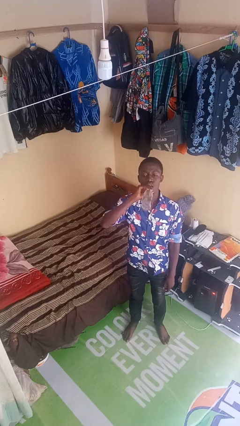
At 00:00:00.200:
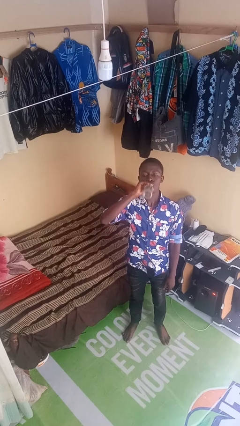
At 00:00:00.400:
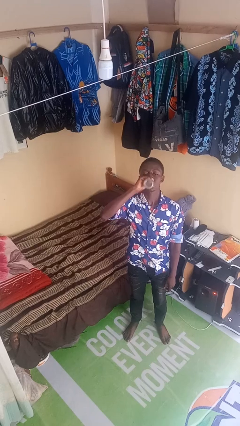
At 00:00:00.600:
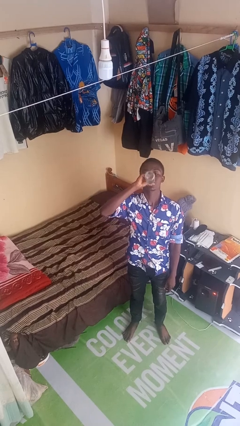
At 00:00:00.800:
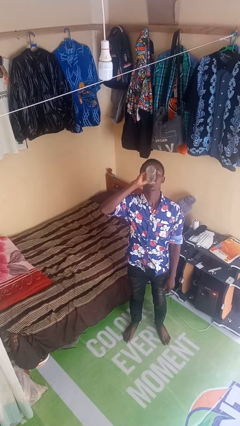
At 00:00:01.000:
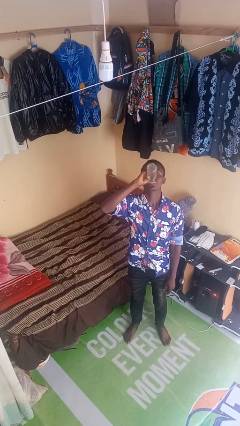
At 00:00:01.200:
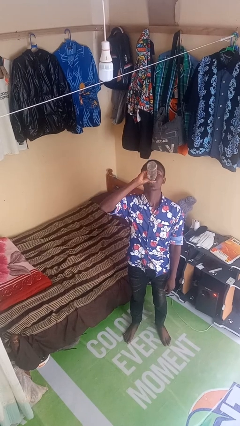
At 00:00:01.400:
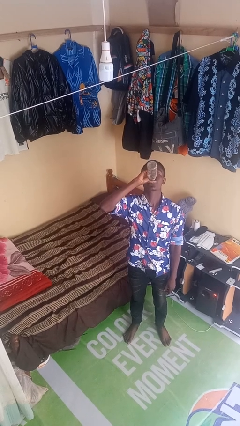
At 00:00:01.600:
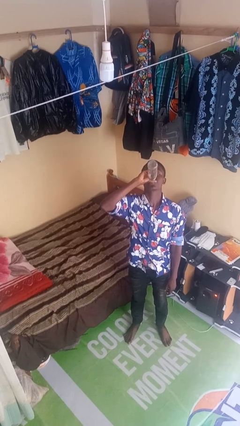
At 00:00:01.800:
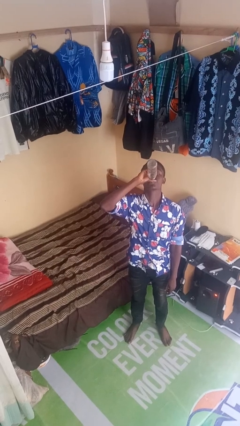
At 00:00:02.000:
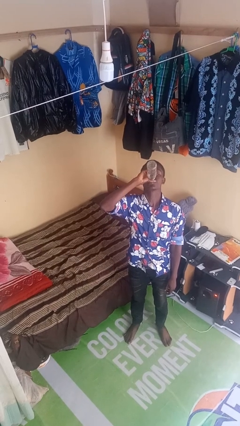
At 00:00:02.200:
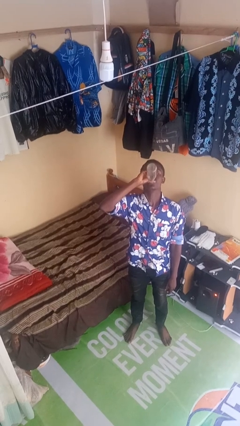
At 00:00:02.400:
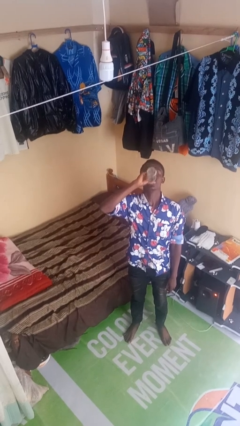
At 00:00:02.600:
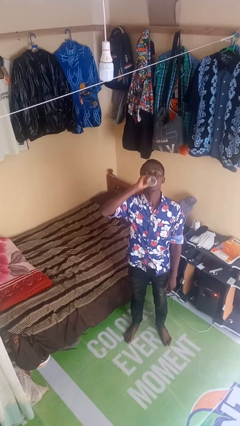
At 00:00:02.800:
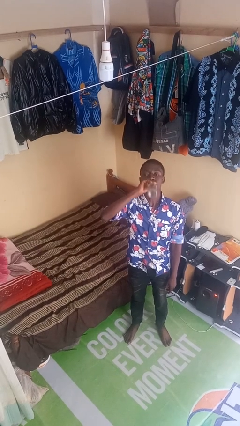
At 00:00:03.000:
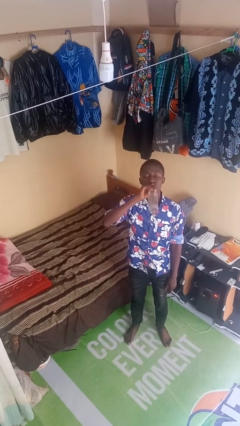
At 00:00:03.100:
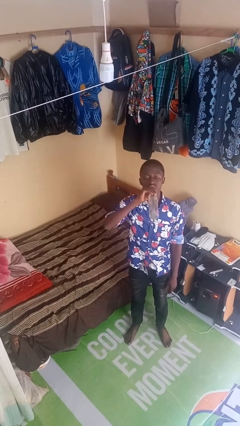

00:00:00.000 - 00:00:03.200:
person drinks from bottle

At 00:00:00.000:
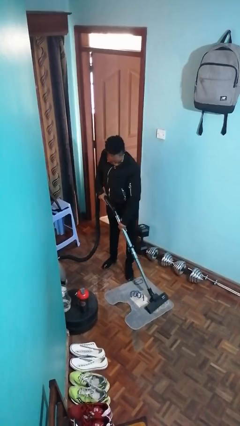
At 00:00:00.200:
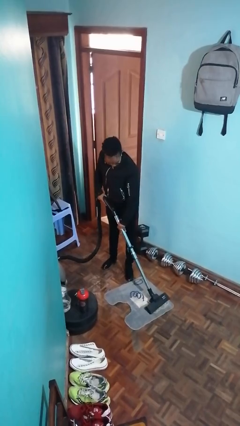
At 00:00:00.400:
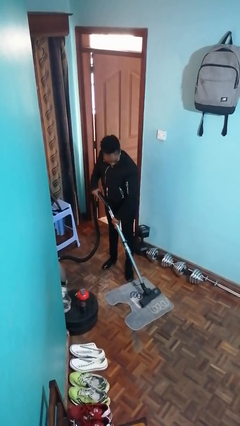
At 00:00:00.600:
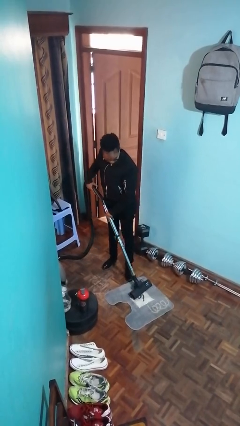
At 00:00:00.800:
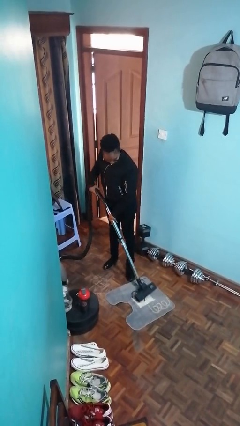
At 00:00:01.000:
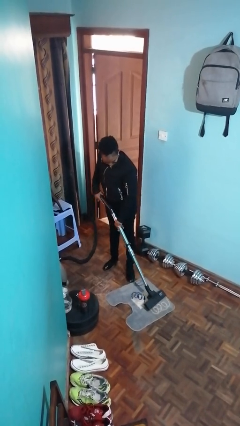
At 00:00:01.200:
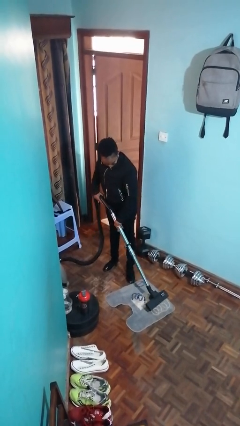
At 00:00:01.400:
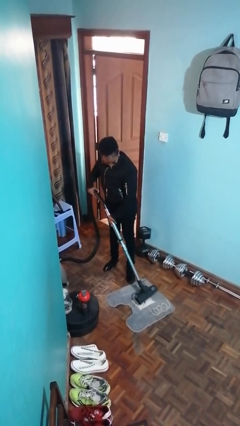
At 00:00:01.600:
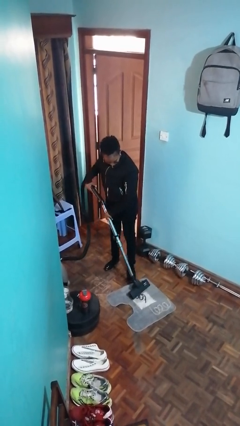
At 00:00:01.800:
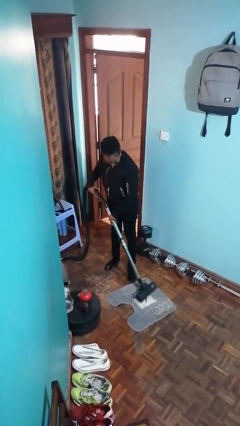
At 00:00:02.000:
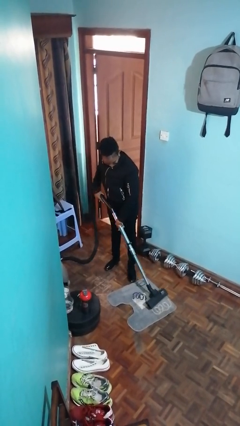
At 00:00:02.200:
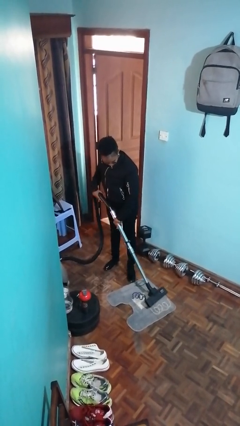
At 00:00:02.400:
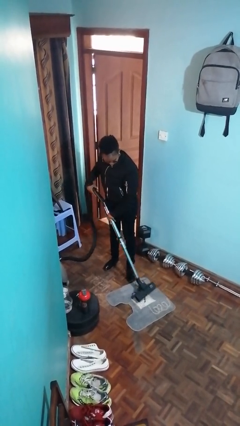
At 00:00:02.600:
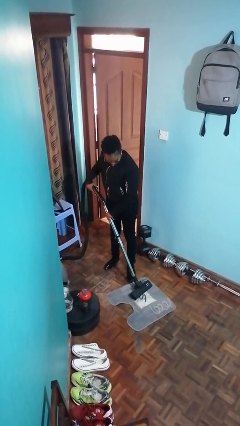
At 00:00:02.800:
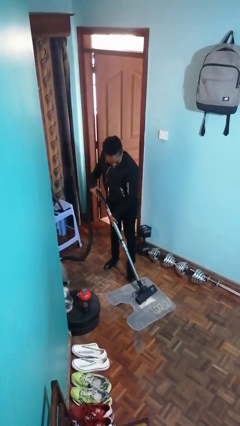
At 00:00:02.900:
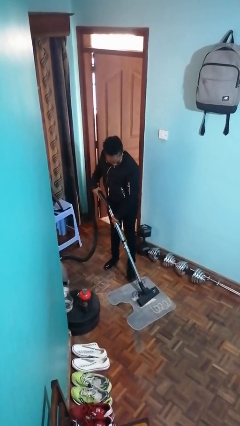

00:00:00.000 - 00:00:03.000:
person vacuums carpet

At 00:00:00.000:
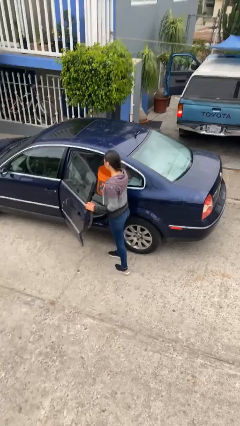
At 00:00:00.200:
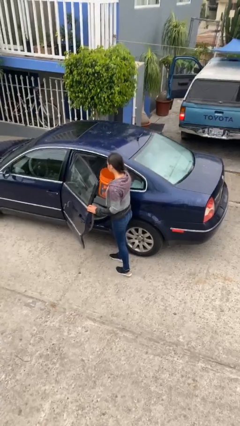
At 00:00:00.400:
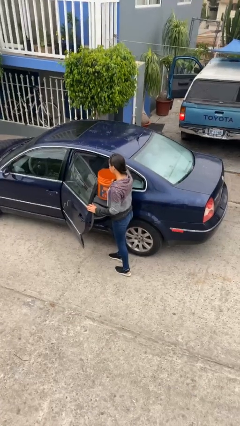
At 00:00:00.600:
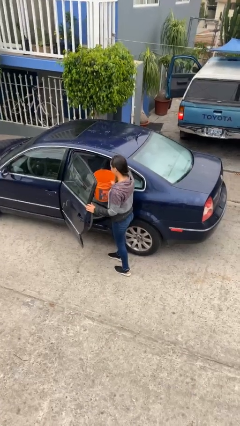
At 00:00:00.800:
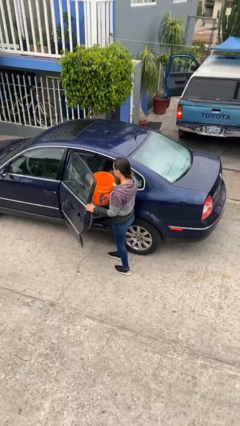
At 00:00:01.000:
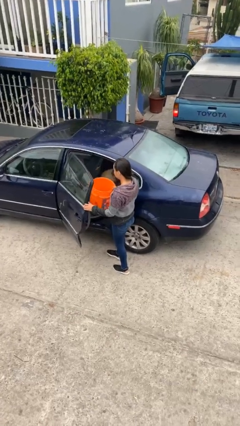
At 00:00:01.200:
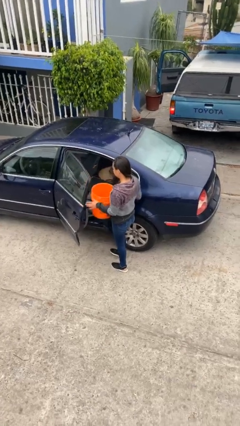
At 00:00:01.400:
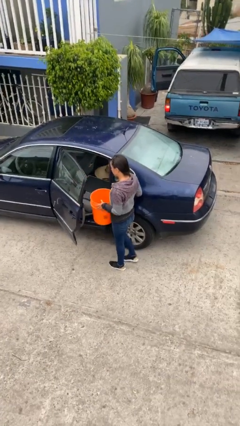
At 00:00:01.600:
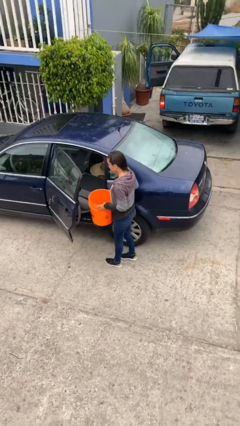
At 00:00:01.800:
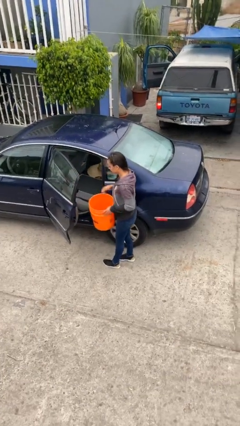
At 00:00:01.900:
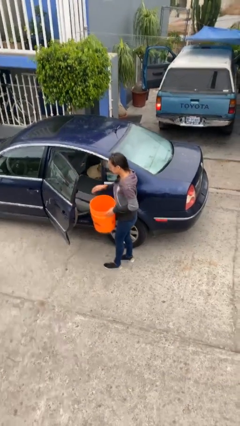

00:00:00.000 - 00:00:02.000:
person unloads car

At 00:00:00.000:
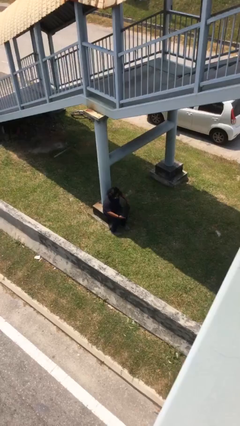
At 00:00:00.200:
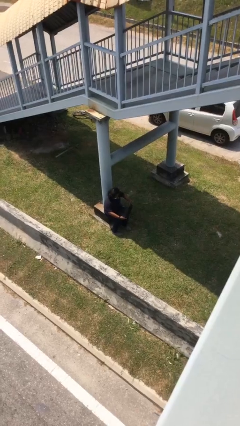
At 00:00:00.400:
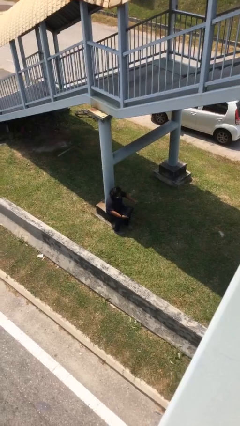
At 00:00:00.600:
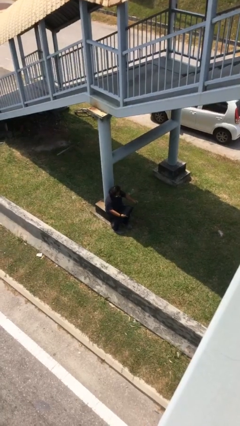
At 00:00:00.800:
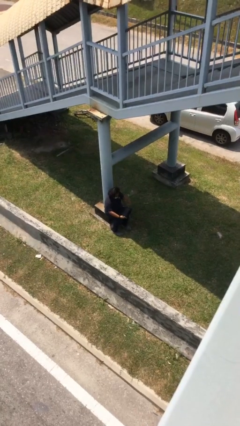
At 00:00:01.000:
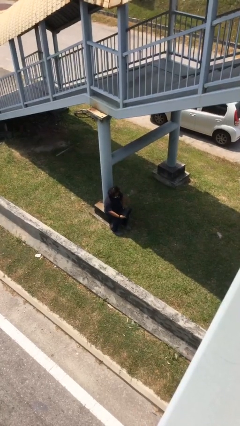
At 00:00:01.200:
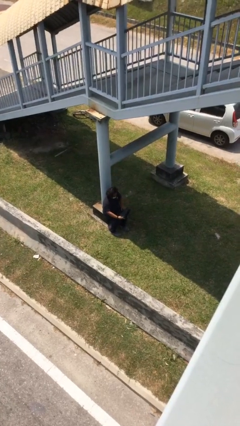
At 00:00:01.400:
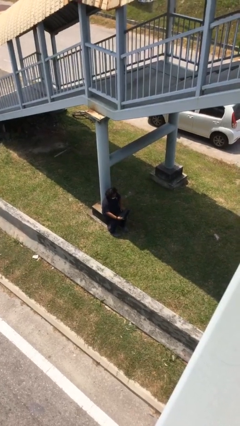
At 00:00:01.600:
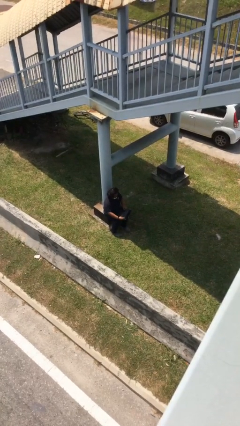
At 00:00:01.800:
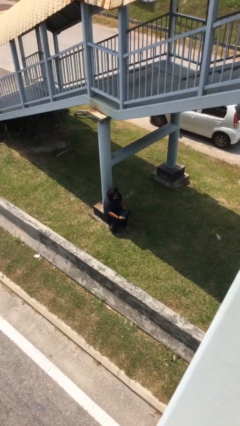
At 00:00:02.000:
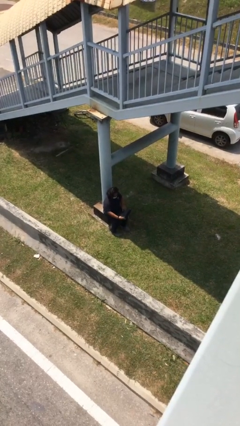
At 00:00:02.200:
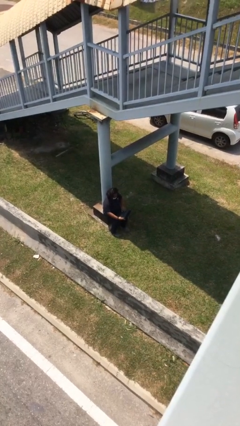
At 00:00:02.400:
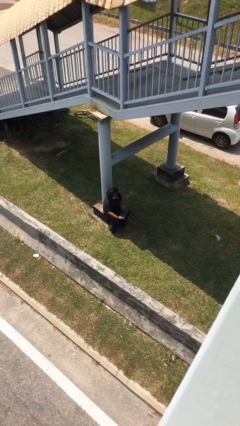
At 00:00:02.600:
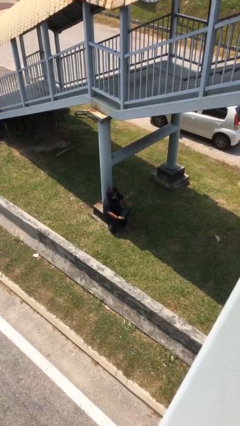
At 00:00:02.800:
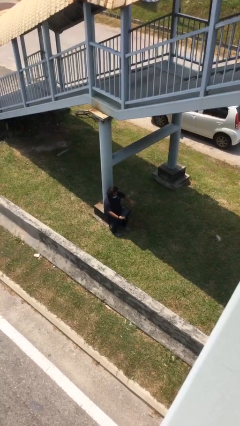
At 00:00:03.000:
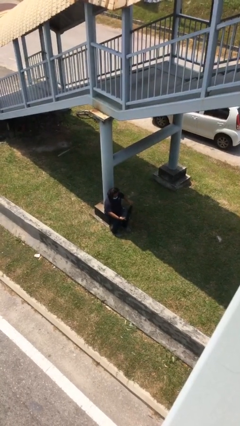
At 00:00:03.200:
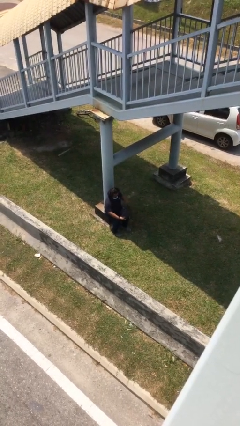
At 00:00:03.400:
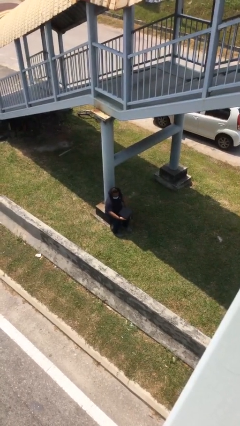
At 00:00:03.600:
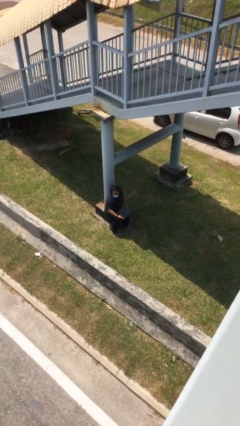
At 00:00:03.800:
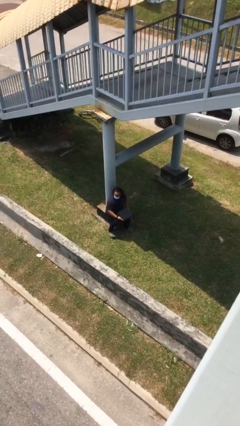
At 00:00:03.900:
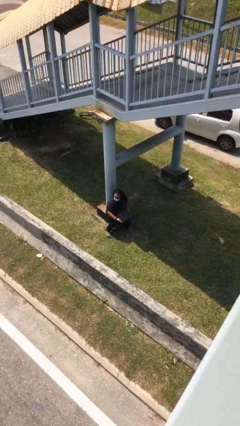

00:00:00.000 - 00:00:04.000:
person interacts with laptop

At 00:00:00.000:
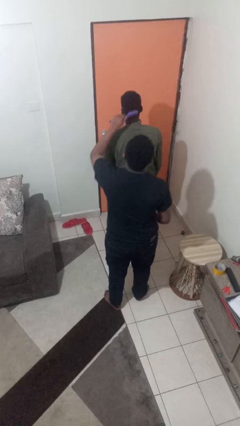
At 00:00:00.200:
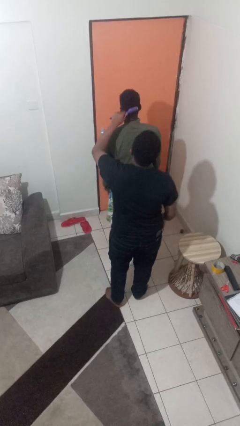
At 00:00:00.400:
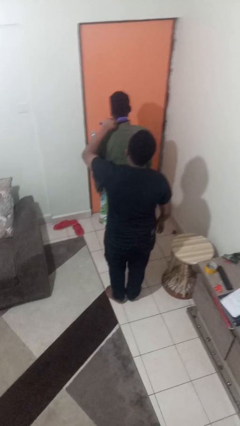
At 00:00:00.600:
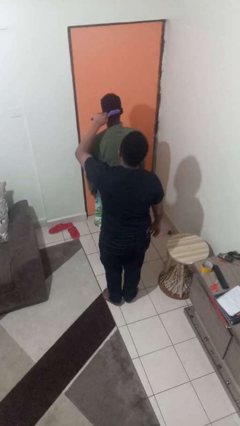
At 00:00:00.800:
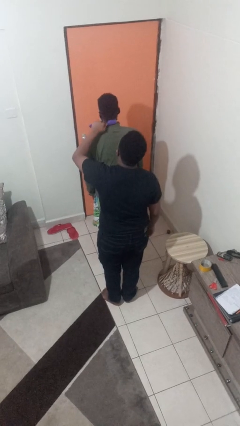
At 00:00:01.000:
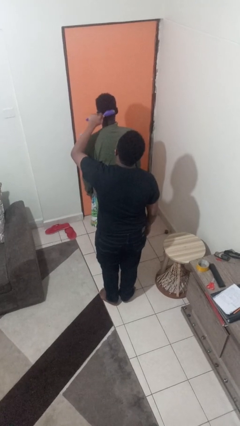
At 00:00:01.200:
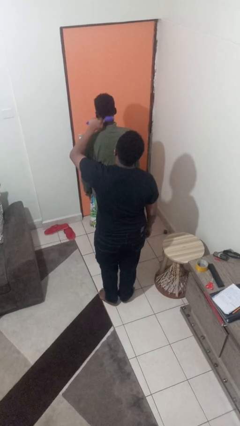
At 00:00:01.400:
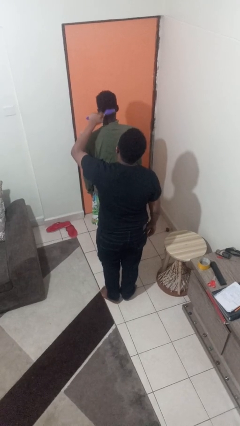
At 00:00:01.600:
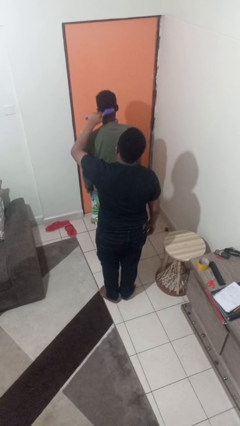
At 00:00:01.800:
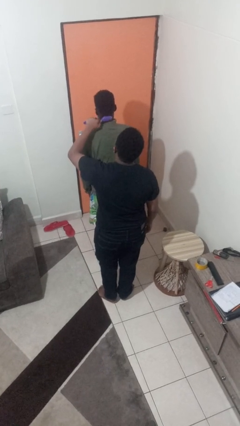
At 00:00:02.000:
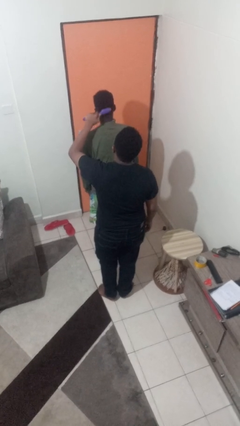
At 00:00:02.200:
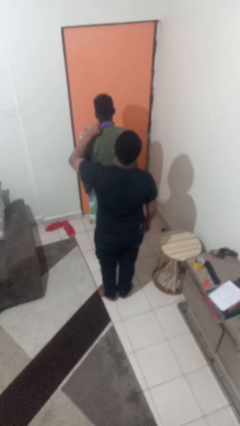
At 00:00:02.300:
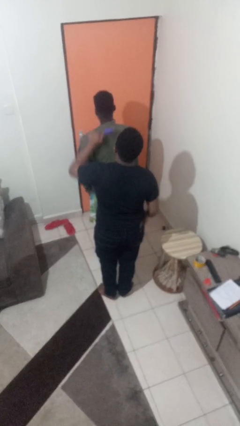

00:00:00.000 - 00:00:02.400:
person brushes hair of person

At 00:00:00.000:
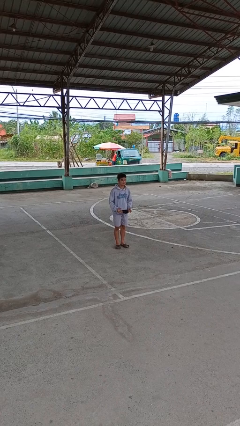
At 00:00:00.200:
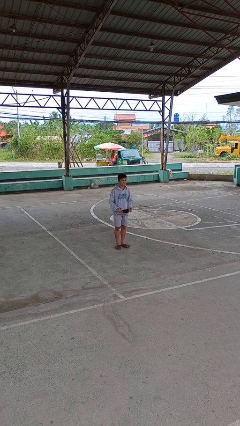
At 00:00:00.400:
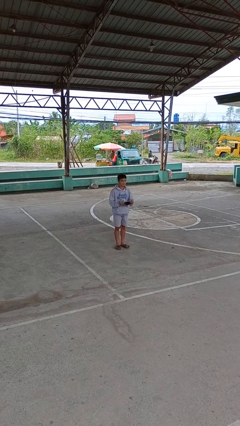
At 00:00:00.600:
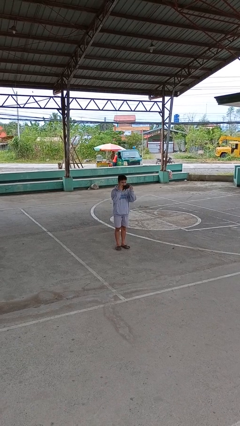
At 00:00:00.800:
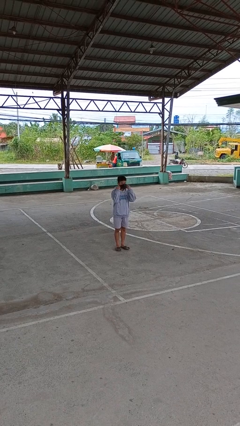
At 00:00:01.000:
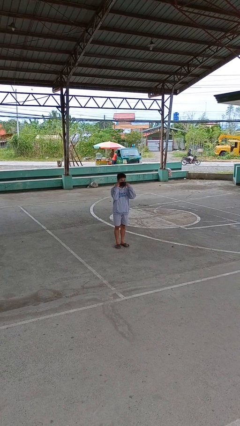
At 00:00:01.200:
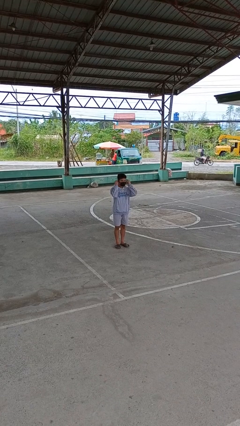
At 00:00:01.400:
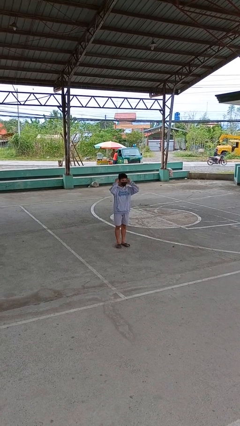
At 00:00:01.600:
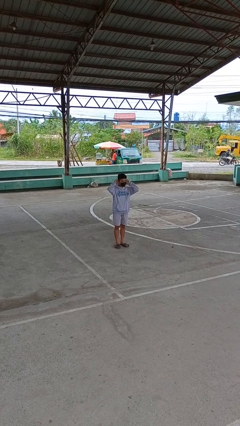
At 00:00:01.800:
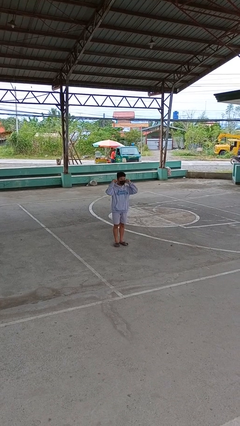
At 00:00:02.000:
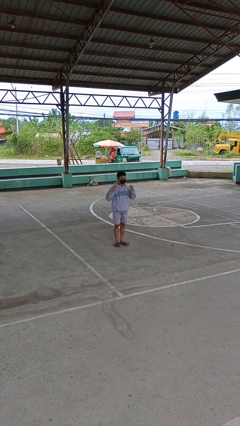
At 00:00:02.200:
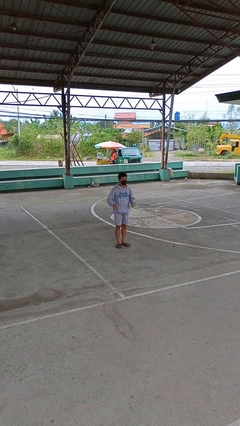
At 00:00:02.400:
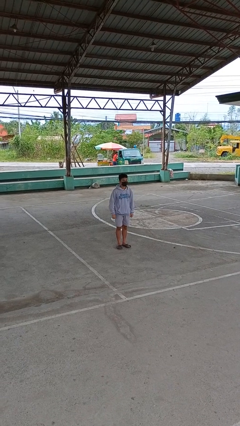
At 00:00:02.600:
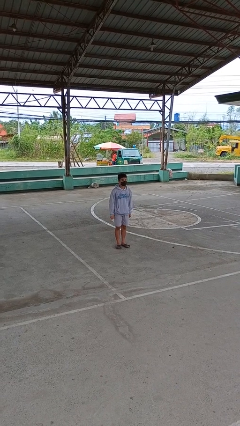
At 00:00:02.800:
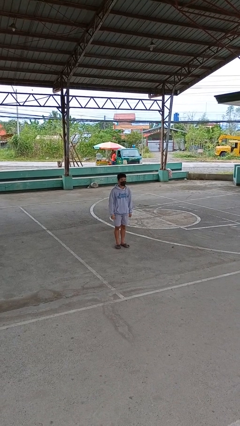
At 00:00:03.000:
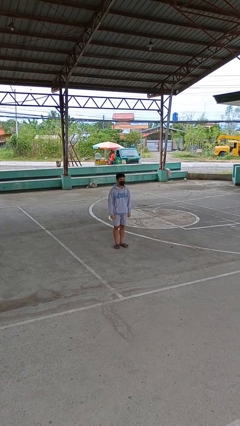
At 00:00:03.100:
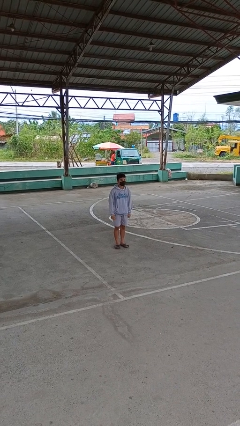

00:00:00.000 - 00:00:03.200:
person puts on facemask
